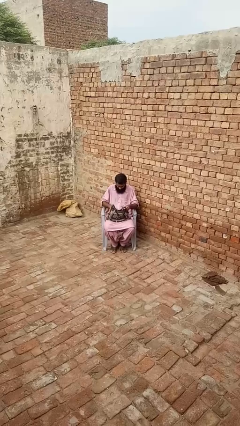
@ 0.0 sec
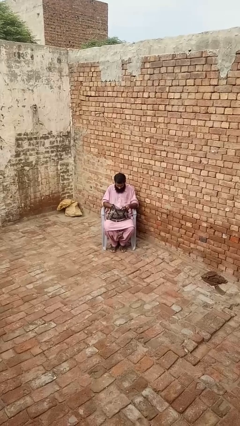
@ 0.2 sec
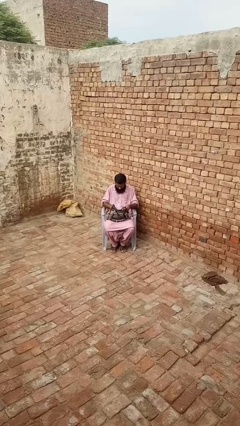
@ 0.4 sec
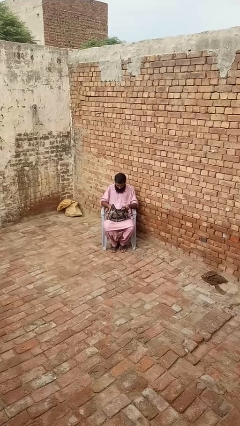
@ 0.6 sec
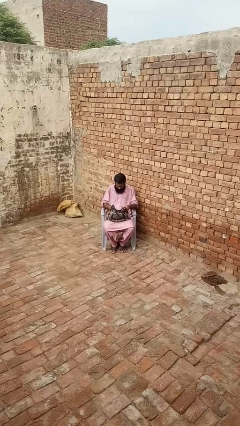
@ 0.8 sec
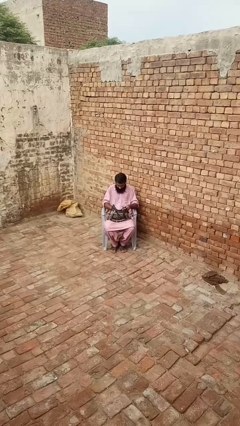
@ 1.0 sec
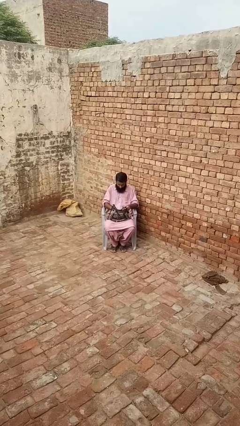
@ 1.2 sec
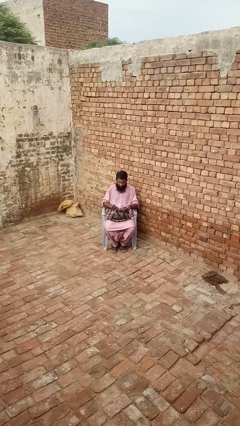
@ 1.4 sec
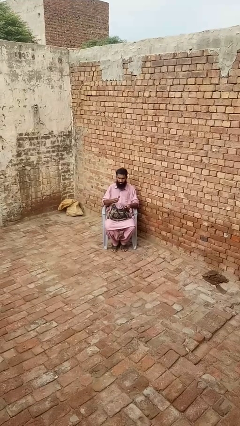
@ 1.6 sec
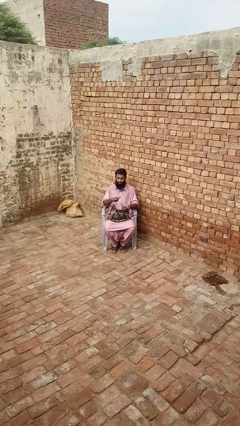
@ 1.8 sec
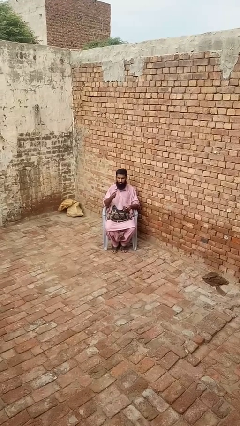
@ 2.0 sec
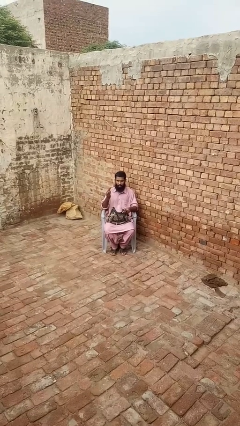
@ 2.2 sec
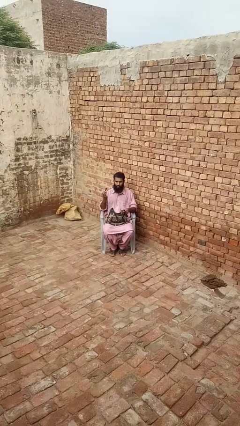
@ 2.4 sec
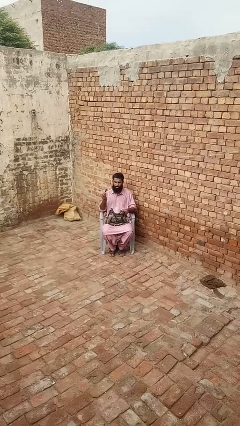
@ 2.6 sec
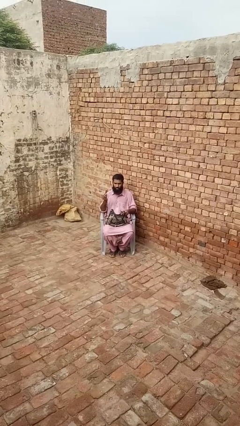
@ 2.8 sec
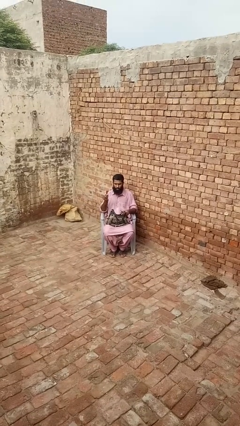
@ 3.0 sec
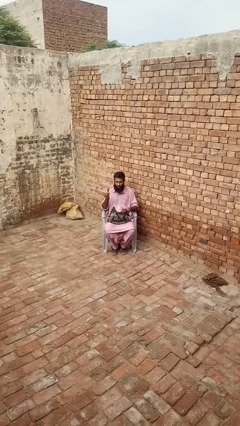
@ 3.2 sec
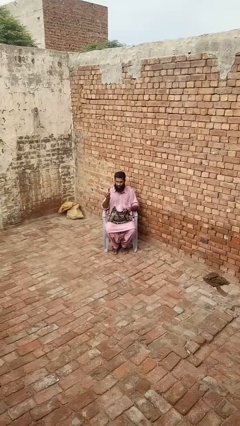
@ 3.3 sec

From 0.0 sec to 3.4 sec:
person takes object from purse

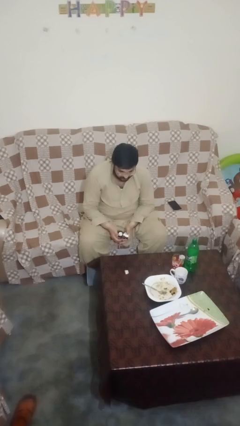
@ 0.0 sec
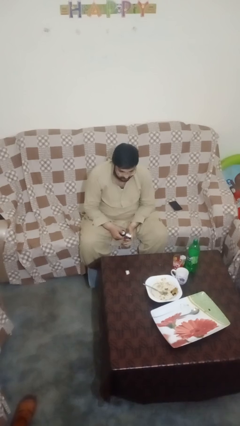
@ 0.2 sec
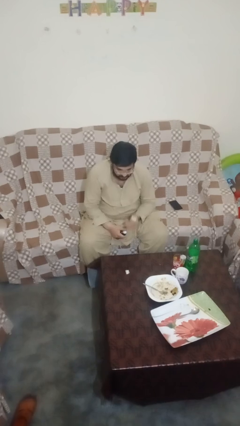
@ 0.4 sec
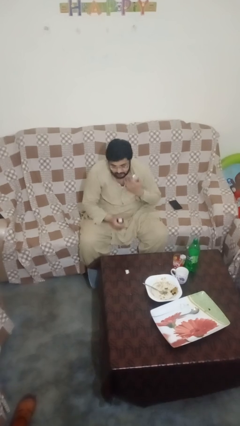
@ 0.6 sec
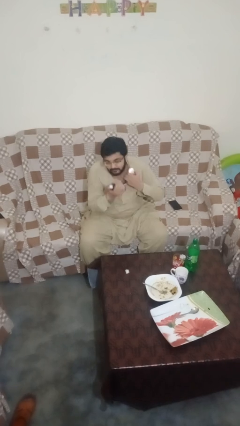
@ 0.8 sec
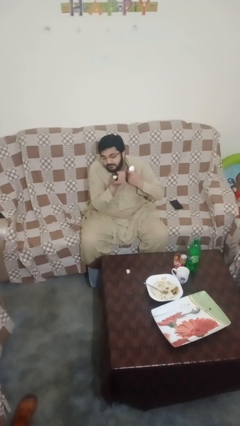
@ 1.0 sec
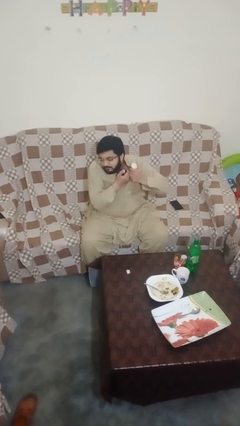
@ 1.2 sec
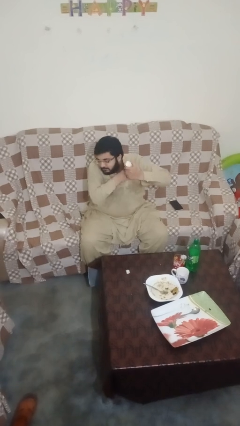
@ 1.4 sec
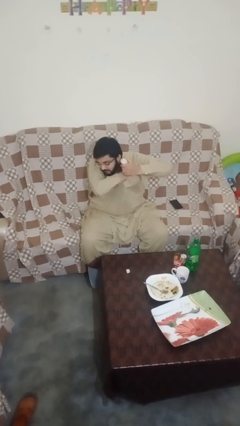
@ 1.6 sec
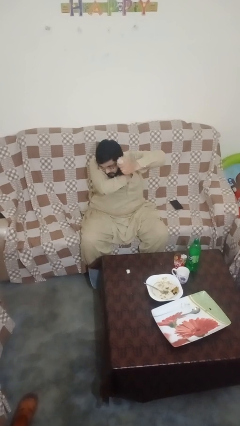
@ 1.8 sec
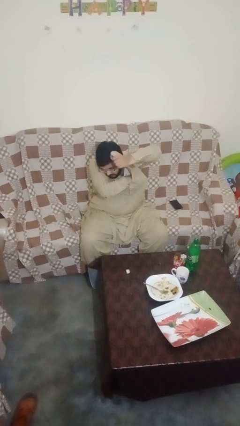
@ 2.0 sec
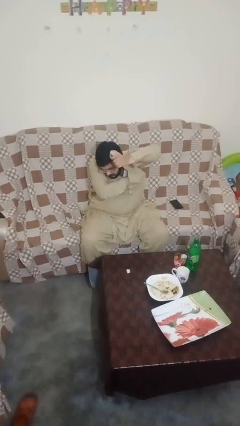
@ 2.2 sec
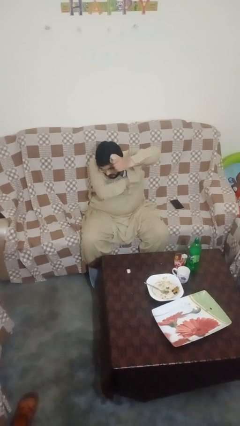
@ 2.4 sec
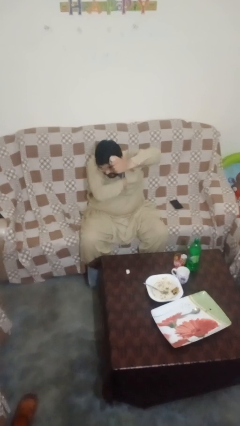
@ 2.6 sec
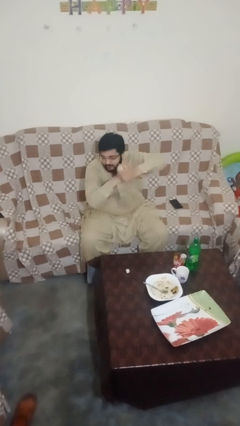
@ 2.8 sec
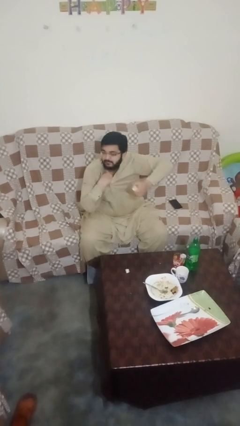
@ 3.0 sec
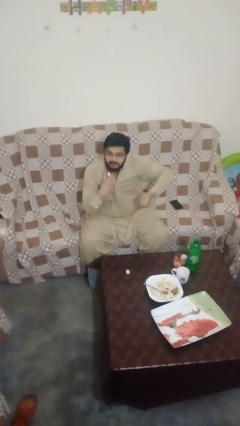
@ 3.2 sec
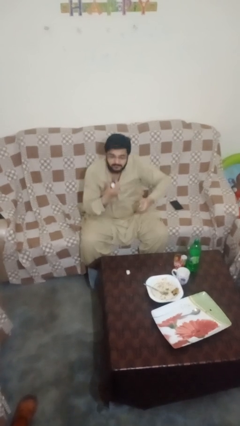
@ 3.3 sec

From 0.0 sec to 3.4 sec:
person applies deodorant

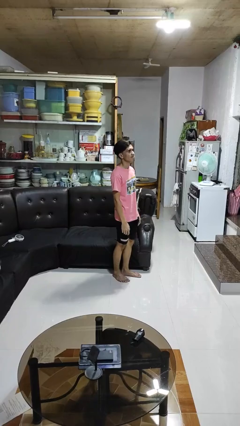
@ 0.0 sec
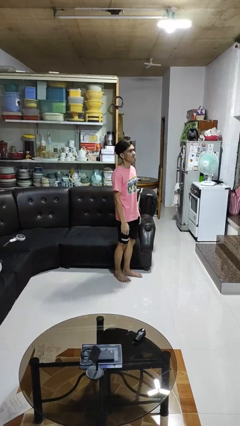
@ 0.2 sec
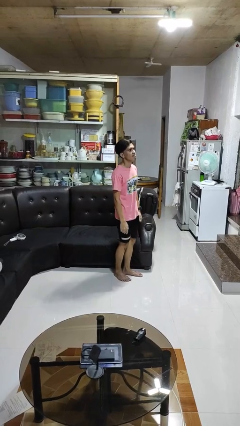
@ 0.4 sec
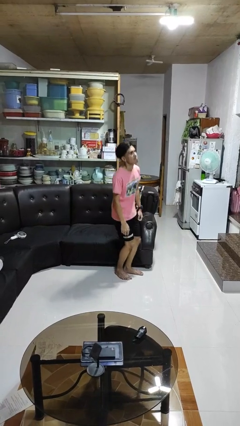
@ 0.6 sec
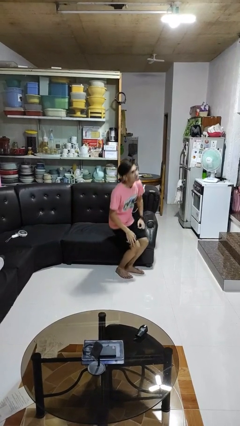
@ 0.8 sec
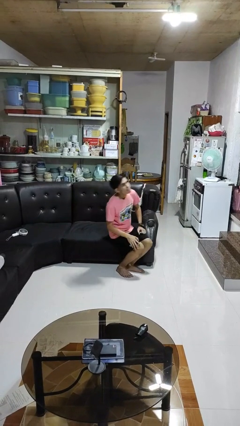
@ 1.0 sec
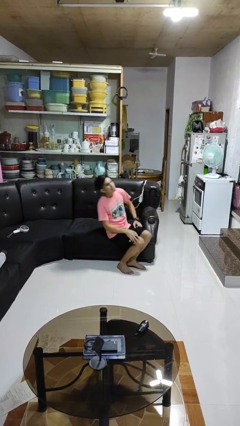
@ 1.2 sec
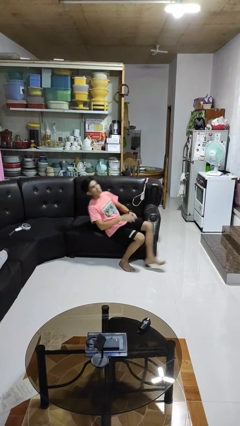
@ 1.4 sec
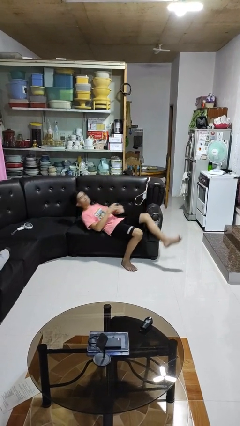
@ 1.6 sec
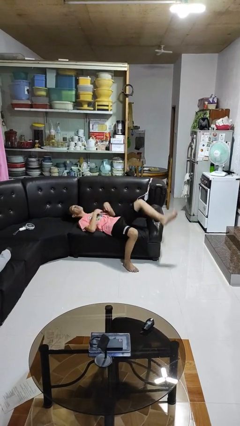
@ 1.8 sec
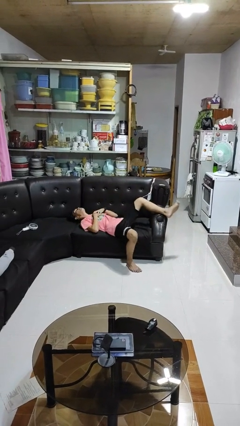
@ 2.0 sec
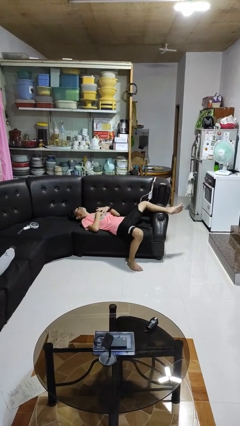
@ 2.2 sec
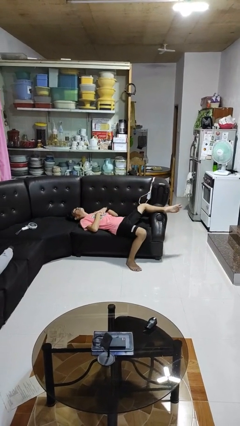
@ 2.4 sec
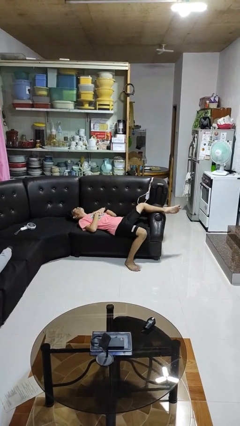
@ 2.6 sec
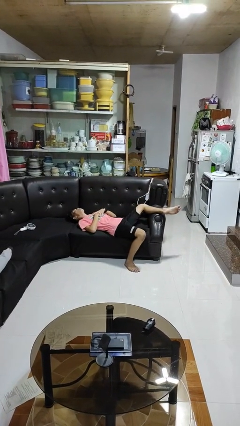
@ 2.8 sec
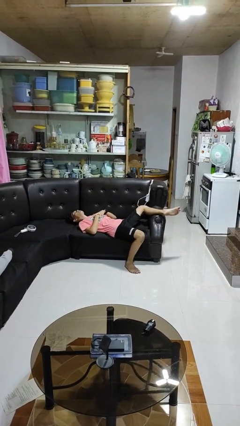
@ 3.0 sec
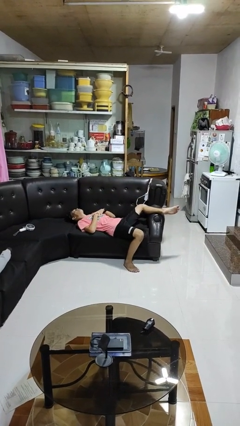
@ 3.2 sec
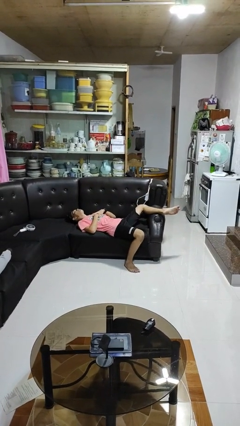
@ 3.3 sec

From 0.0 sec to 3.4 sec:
person lies down on couch

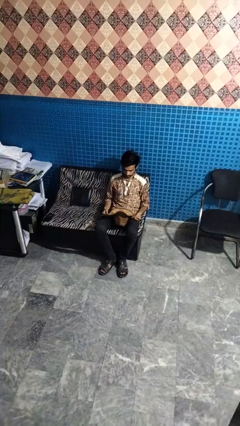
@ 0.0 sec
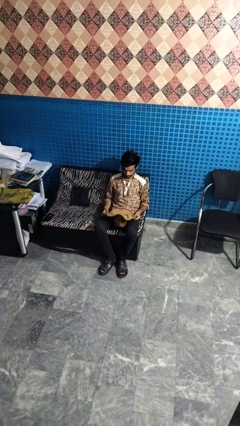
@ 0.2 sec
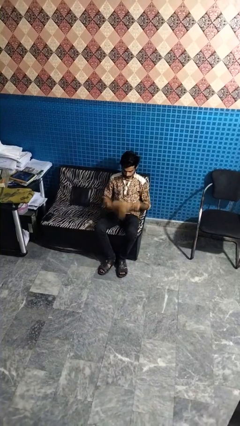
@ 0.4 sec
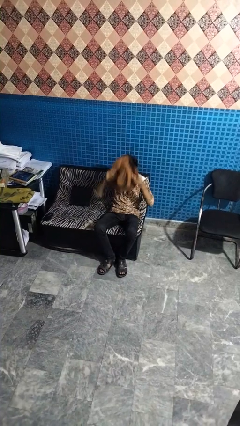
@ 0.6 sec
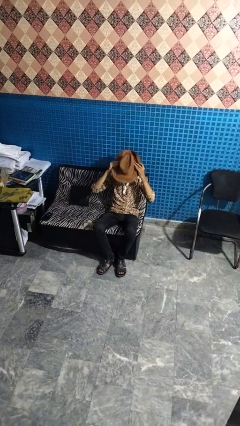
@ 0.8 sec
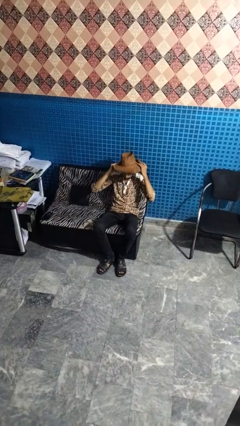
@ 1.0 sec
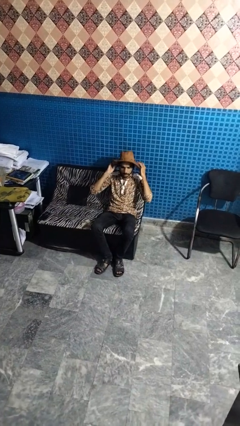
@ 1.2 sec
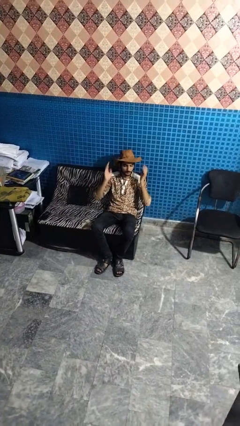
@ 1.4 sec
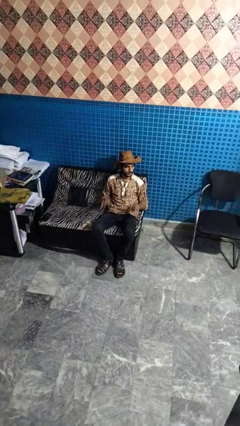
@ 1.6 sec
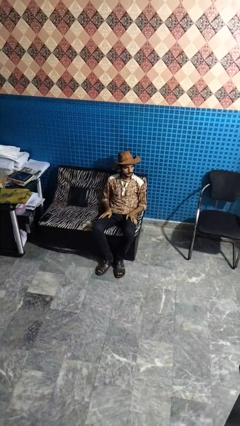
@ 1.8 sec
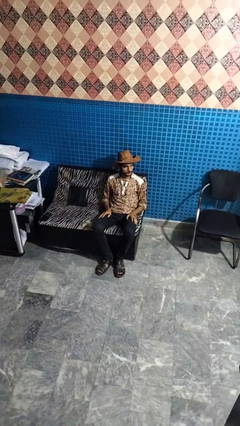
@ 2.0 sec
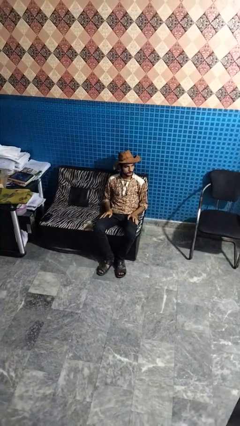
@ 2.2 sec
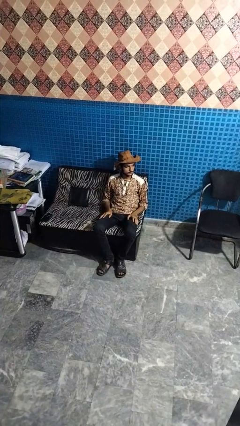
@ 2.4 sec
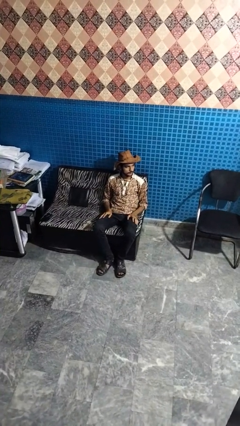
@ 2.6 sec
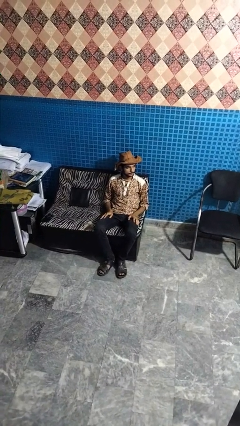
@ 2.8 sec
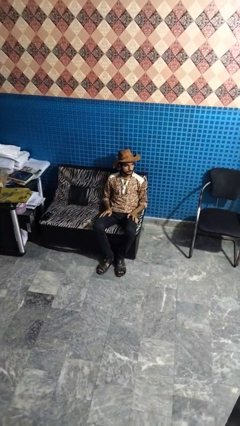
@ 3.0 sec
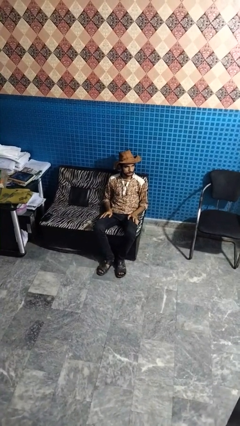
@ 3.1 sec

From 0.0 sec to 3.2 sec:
person puts on hat

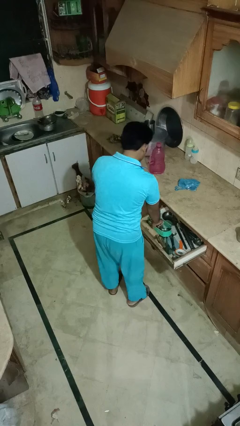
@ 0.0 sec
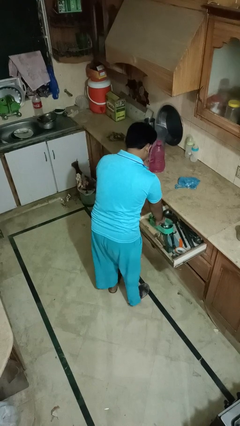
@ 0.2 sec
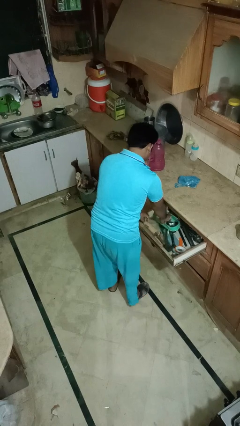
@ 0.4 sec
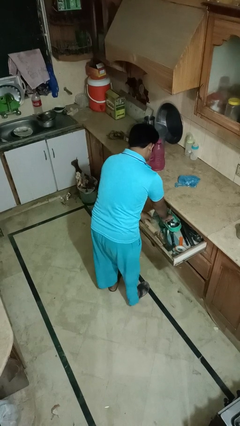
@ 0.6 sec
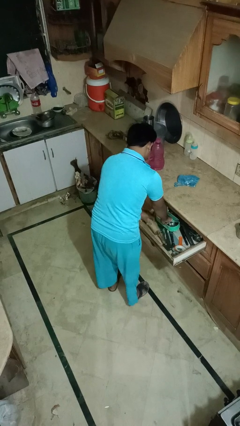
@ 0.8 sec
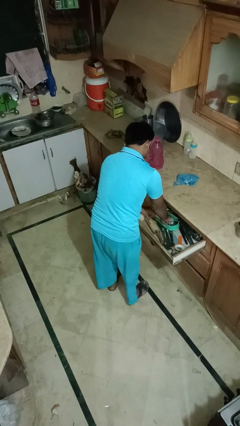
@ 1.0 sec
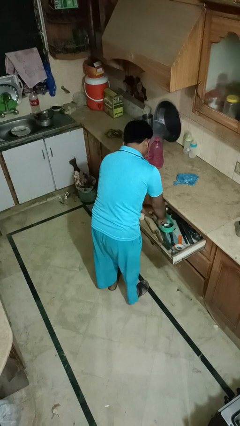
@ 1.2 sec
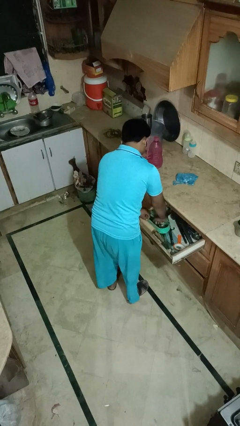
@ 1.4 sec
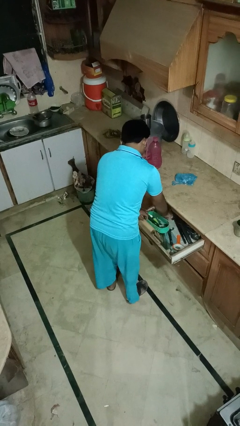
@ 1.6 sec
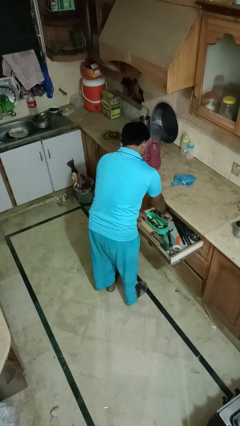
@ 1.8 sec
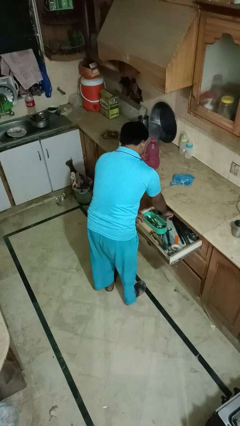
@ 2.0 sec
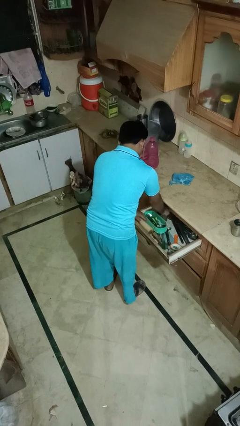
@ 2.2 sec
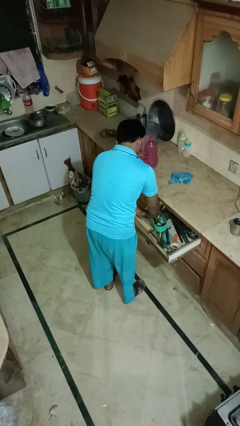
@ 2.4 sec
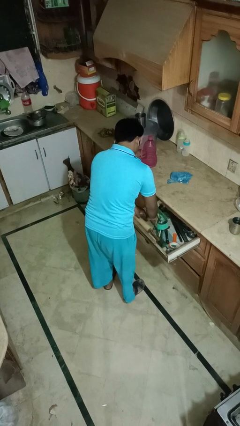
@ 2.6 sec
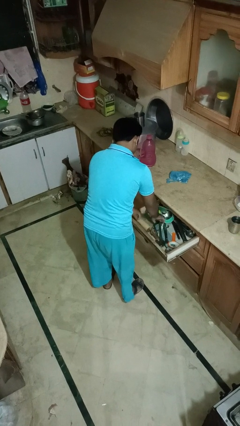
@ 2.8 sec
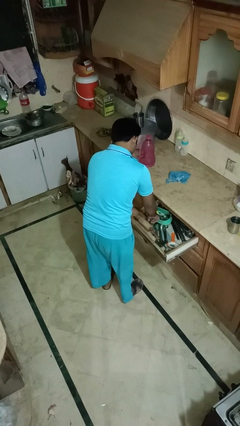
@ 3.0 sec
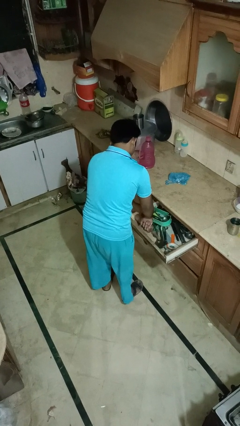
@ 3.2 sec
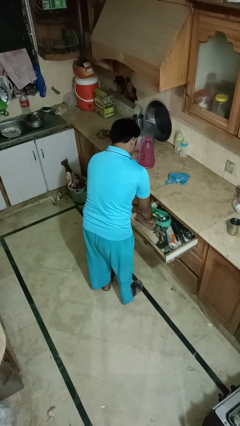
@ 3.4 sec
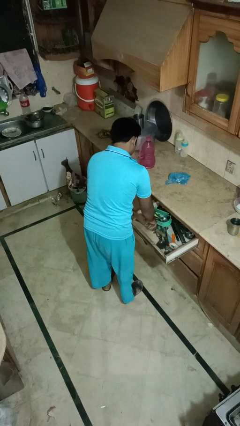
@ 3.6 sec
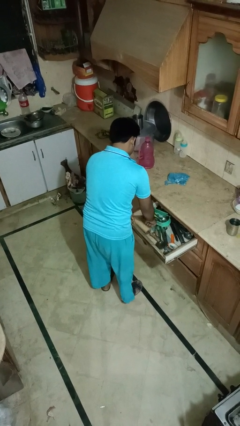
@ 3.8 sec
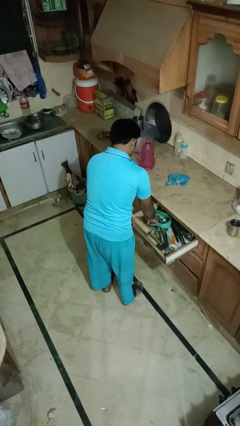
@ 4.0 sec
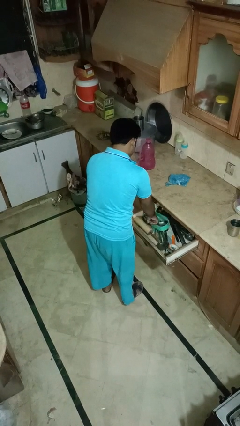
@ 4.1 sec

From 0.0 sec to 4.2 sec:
person searches in kitchen drawer
